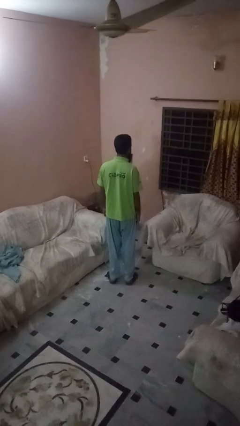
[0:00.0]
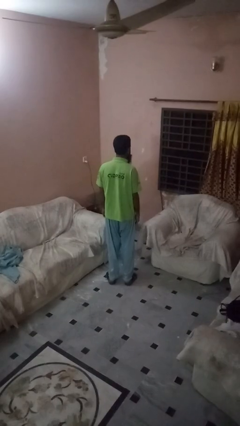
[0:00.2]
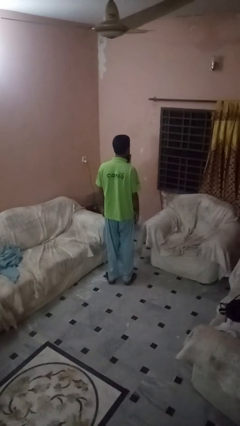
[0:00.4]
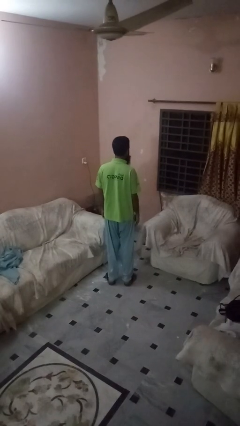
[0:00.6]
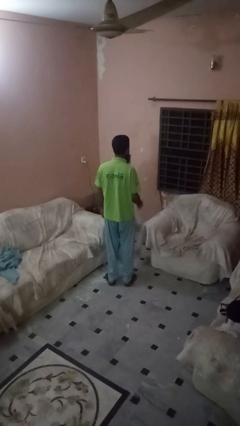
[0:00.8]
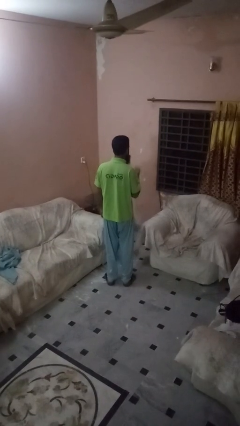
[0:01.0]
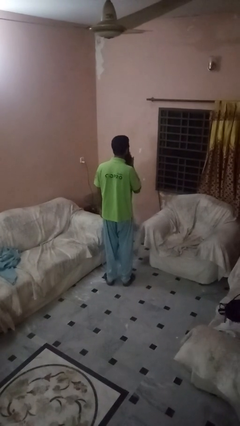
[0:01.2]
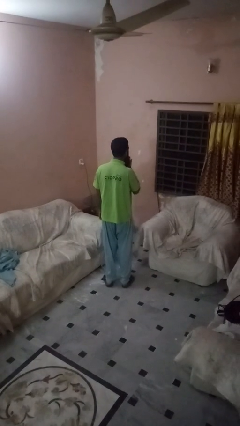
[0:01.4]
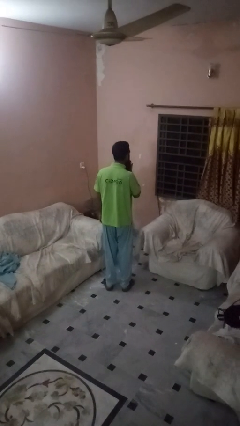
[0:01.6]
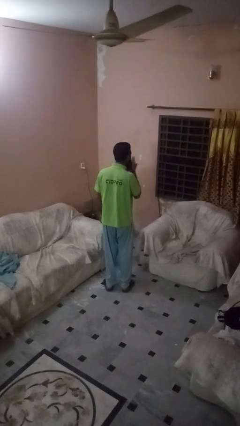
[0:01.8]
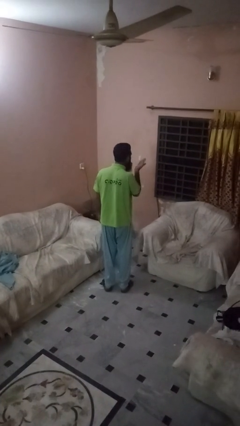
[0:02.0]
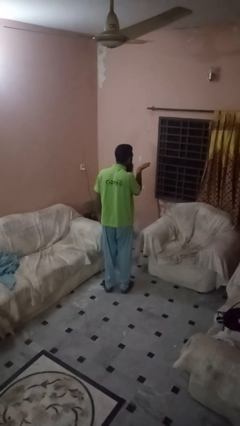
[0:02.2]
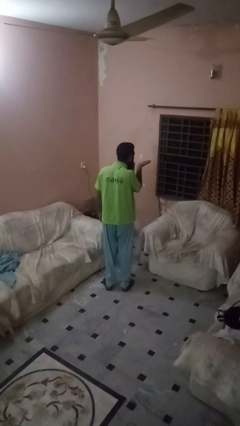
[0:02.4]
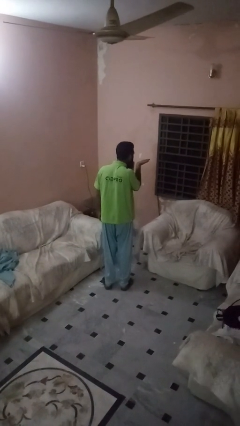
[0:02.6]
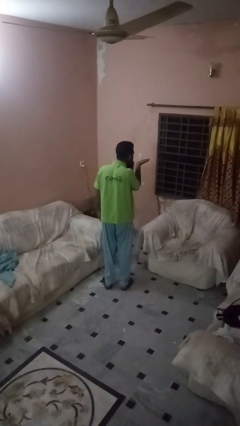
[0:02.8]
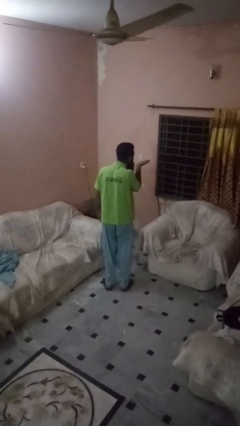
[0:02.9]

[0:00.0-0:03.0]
person gestures blow kiss

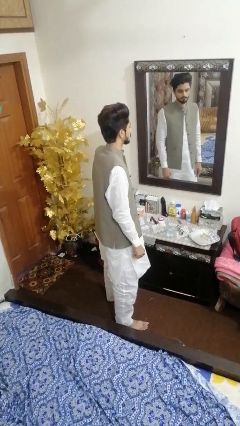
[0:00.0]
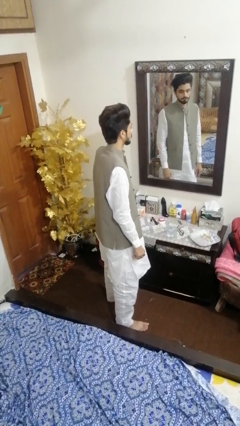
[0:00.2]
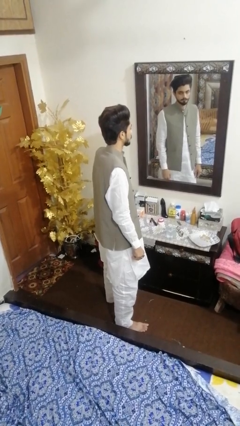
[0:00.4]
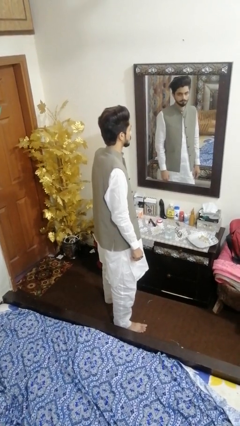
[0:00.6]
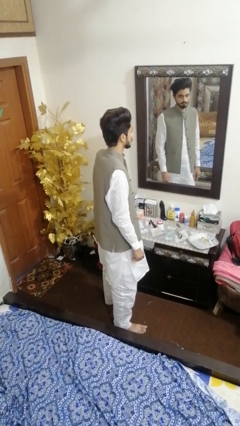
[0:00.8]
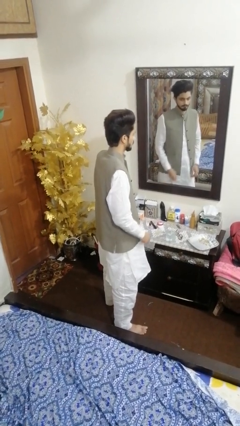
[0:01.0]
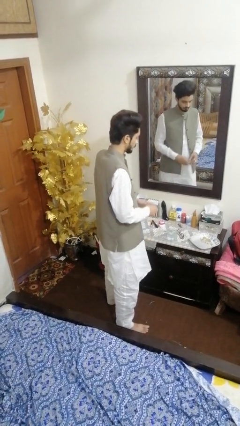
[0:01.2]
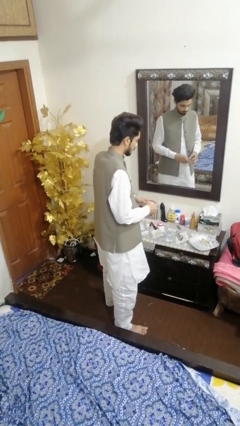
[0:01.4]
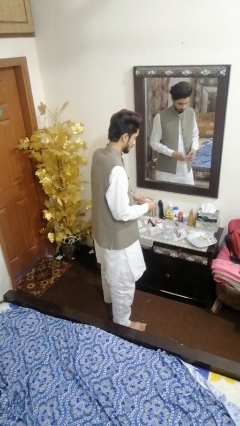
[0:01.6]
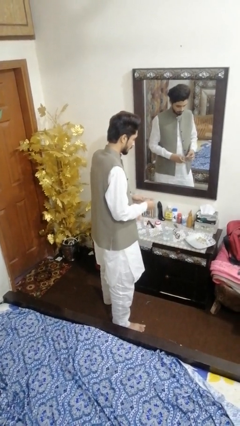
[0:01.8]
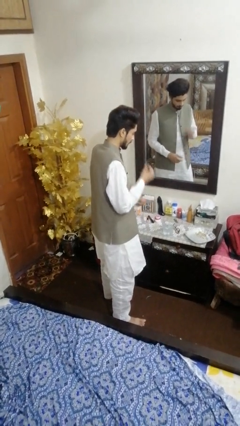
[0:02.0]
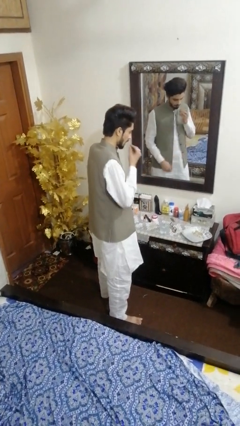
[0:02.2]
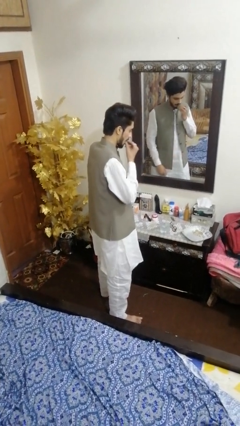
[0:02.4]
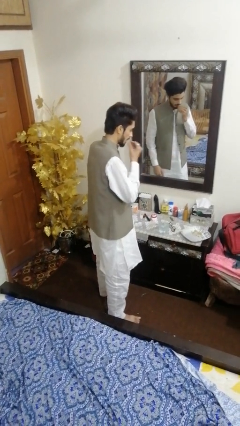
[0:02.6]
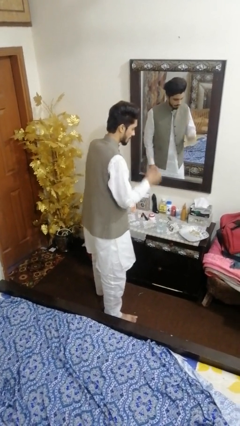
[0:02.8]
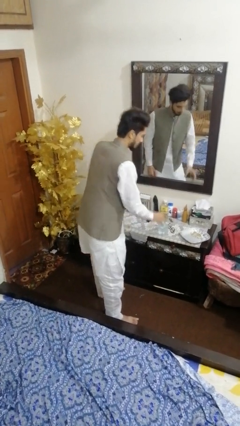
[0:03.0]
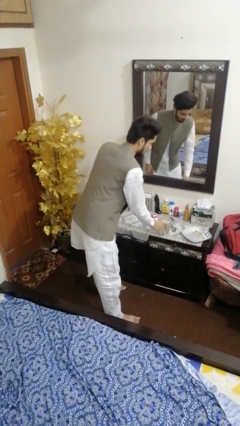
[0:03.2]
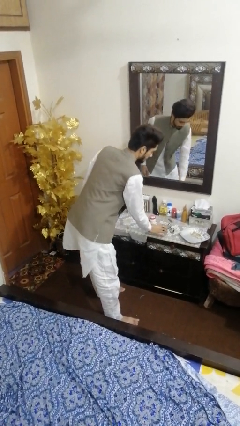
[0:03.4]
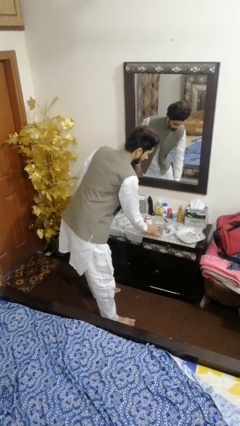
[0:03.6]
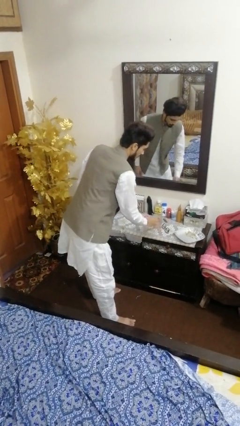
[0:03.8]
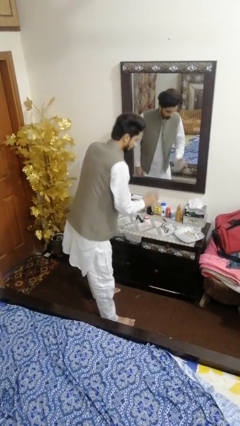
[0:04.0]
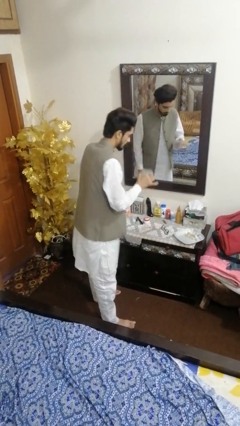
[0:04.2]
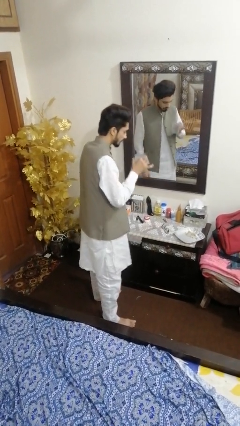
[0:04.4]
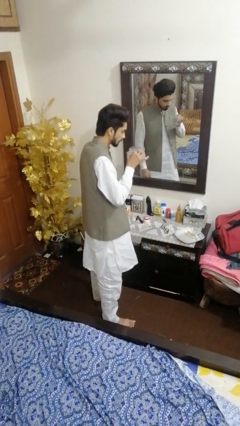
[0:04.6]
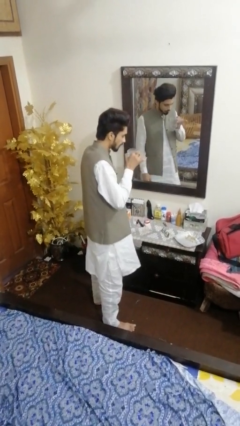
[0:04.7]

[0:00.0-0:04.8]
person takes medicine pills

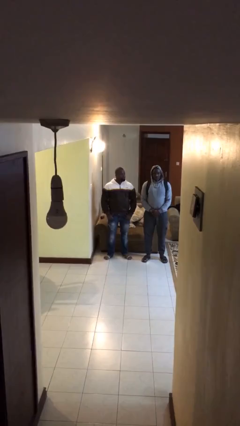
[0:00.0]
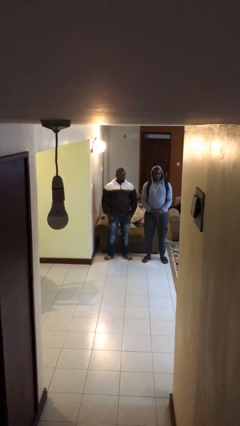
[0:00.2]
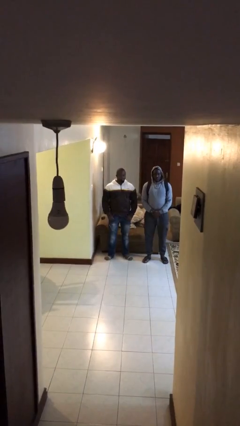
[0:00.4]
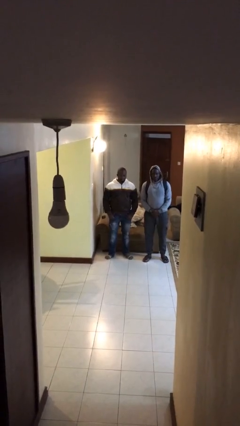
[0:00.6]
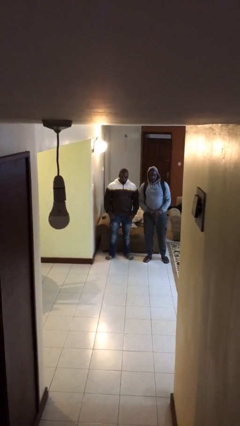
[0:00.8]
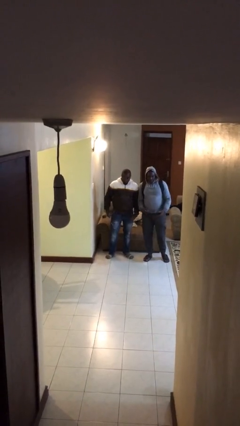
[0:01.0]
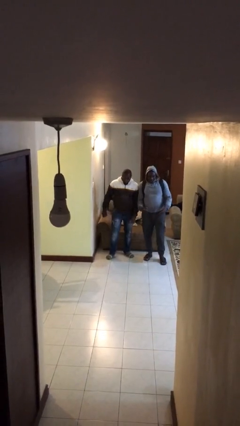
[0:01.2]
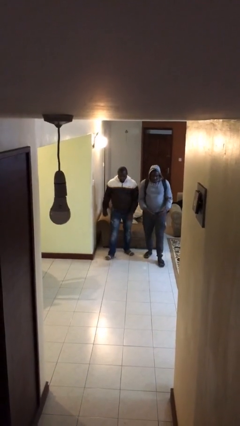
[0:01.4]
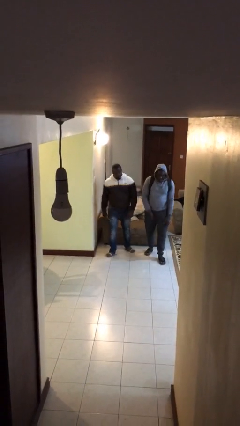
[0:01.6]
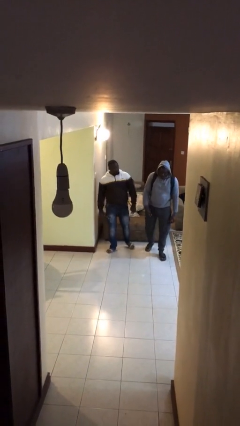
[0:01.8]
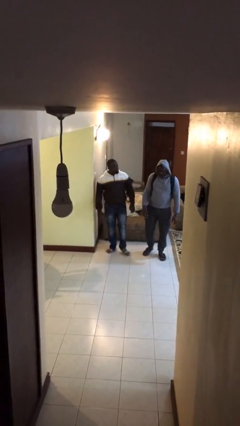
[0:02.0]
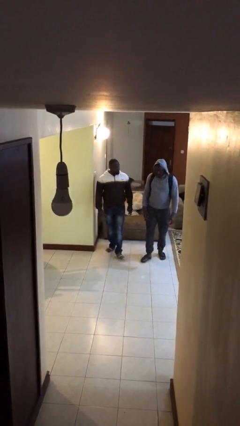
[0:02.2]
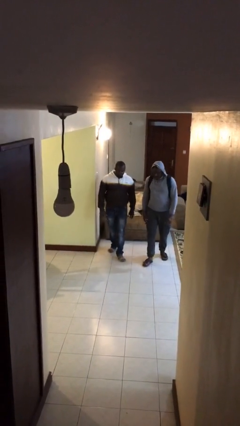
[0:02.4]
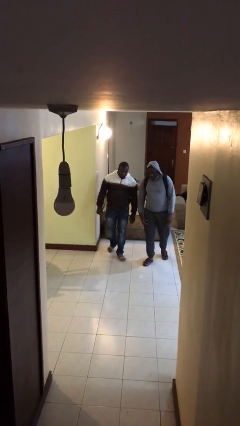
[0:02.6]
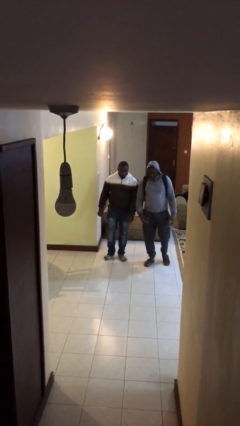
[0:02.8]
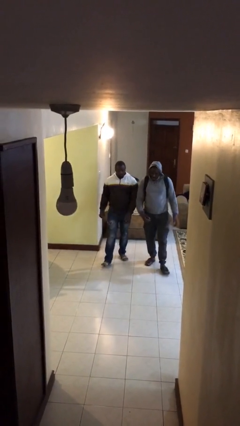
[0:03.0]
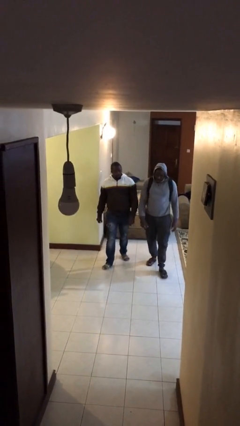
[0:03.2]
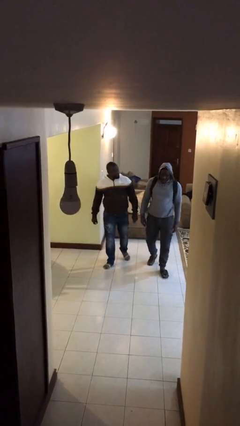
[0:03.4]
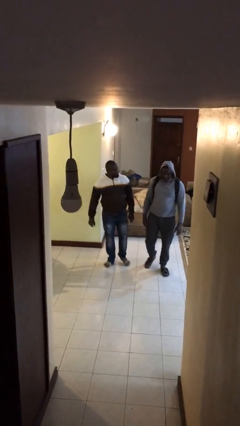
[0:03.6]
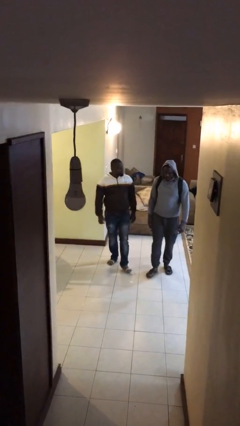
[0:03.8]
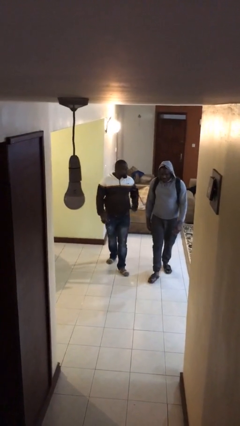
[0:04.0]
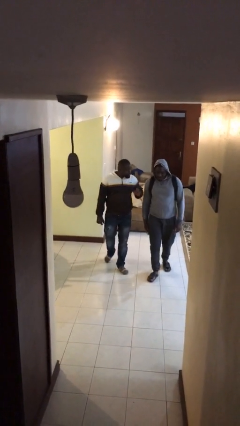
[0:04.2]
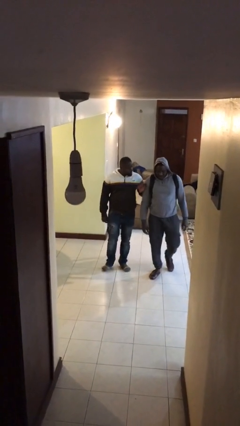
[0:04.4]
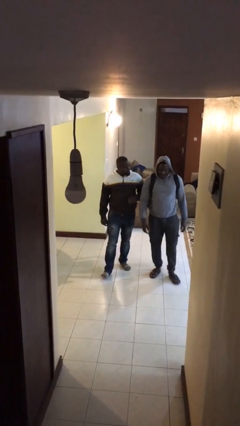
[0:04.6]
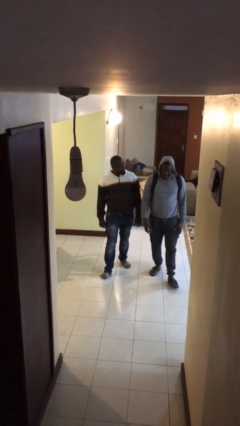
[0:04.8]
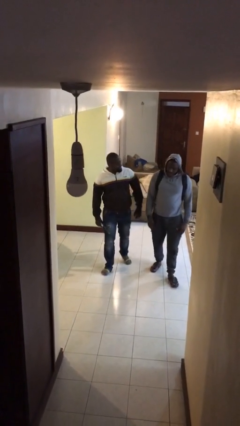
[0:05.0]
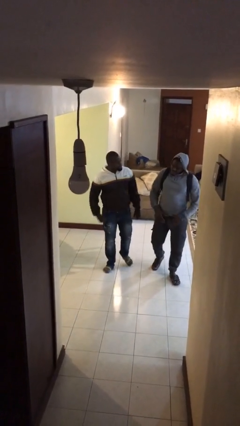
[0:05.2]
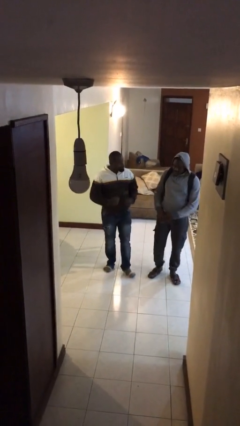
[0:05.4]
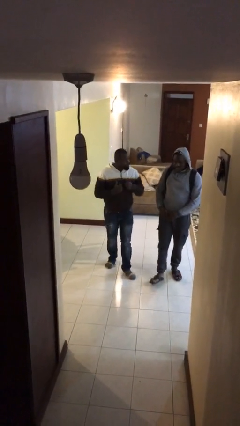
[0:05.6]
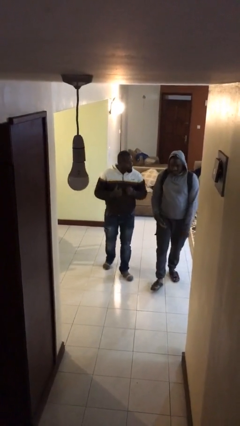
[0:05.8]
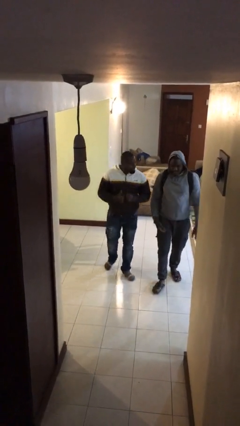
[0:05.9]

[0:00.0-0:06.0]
person talks to person

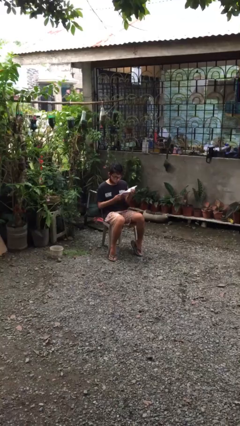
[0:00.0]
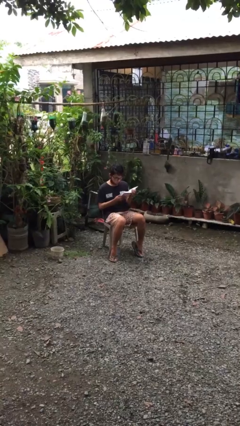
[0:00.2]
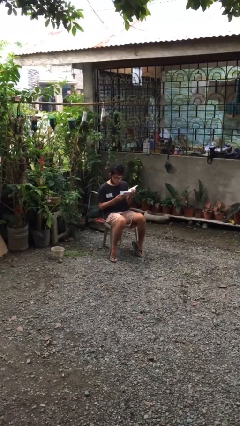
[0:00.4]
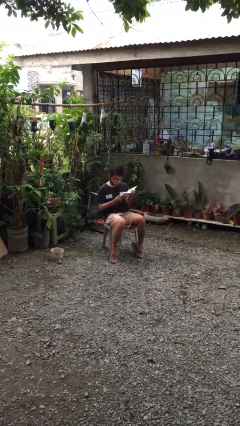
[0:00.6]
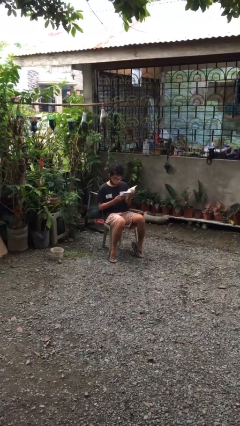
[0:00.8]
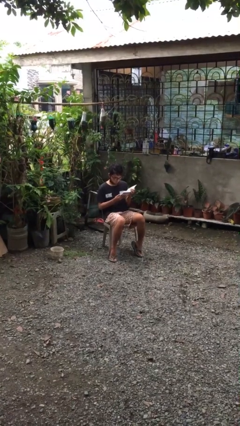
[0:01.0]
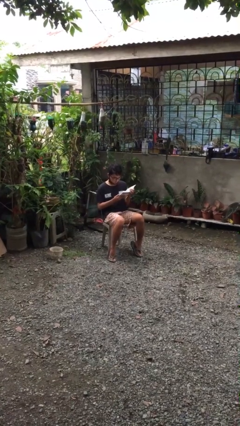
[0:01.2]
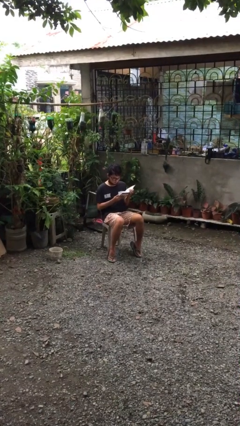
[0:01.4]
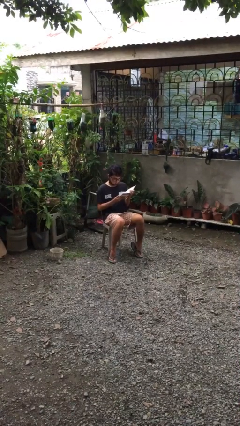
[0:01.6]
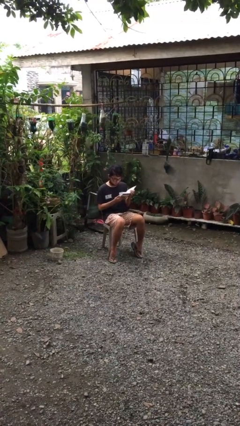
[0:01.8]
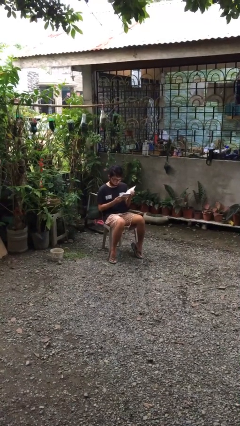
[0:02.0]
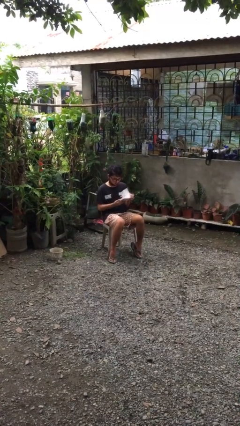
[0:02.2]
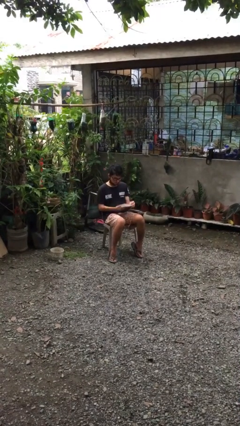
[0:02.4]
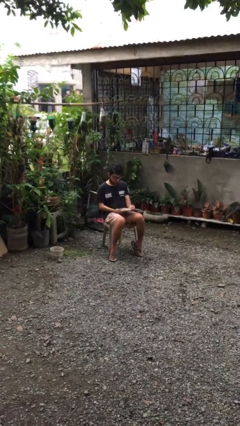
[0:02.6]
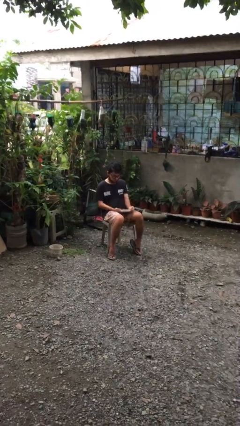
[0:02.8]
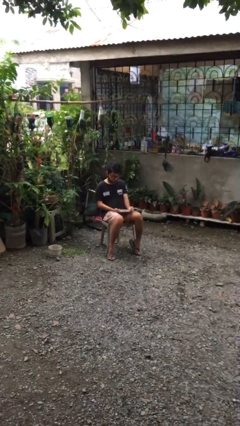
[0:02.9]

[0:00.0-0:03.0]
person reads document

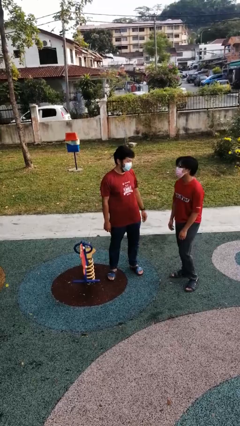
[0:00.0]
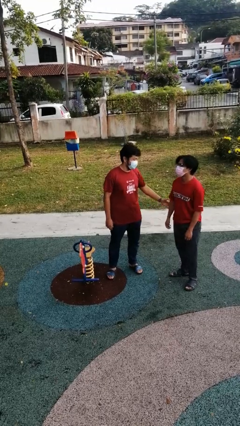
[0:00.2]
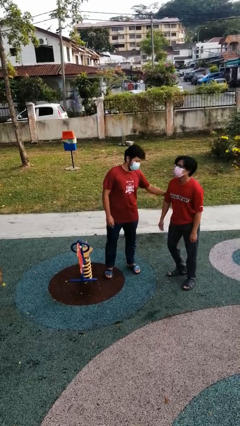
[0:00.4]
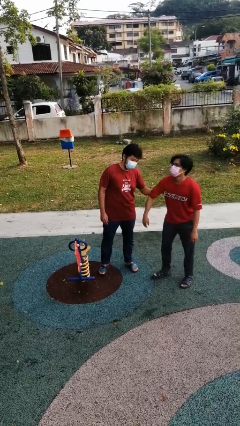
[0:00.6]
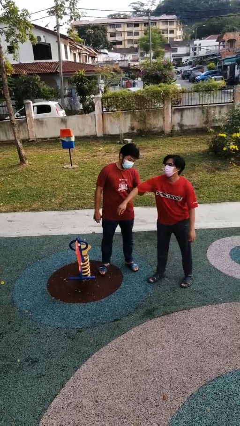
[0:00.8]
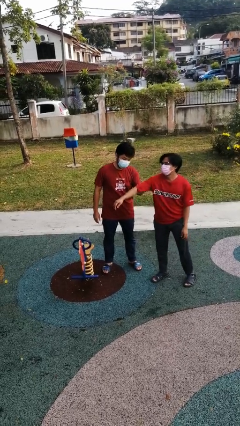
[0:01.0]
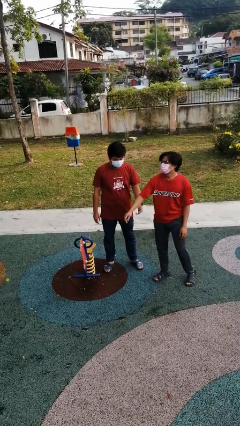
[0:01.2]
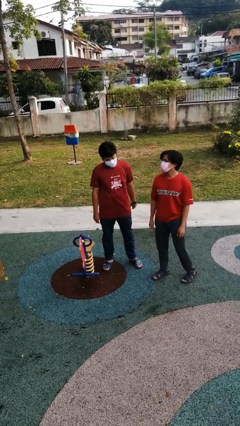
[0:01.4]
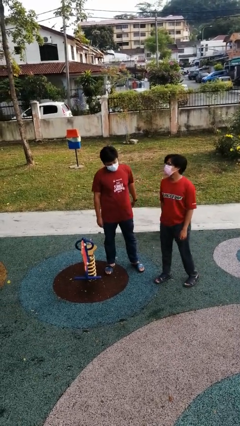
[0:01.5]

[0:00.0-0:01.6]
person grabs person by bicep
